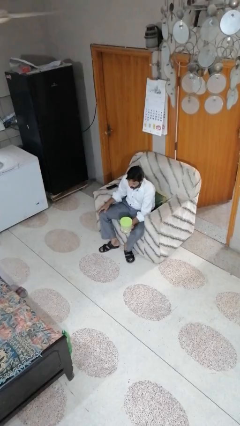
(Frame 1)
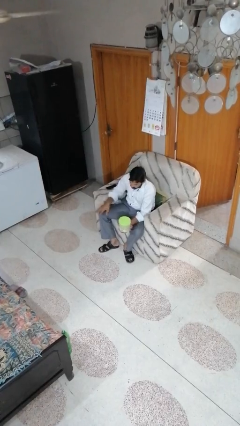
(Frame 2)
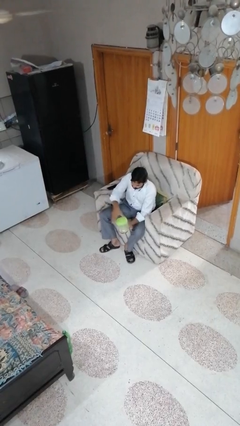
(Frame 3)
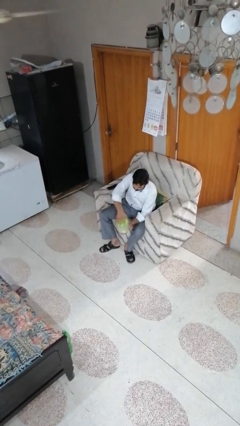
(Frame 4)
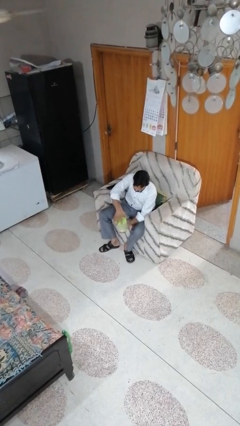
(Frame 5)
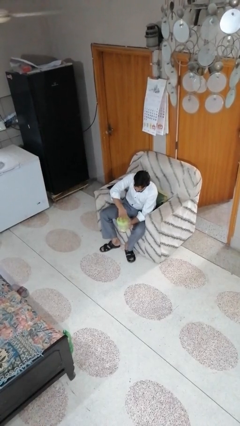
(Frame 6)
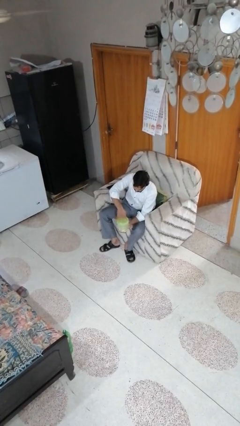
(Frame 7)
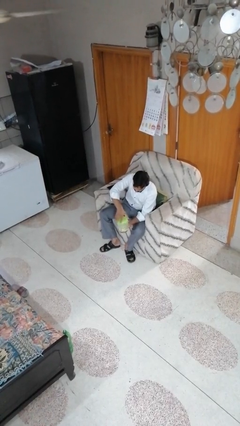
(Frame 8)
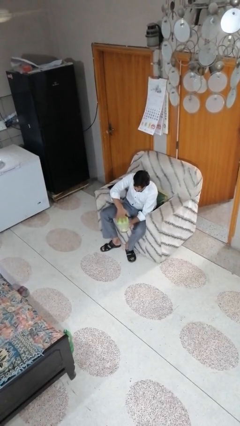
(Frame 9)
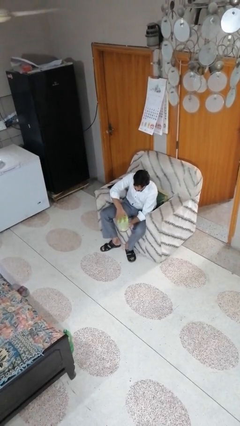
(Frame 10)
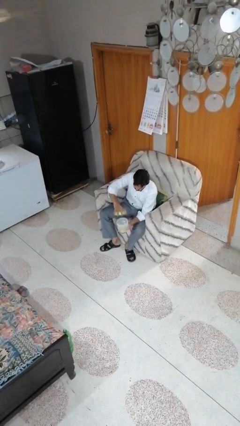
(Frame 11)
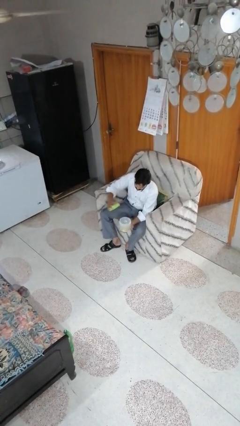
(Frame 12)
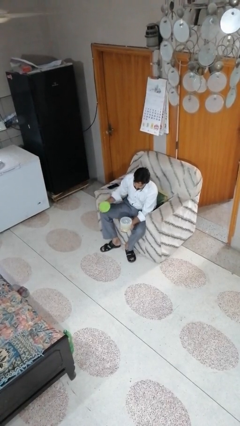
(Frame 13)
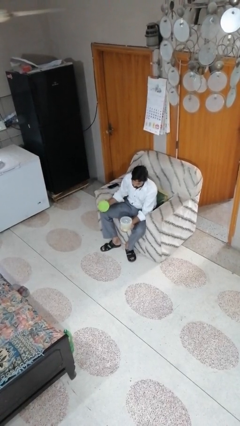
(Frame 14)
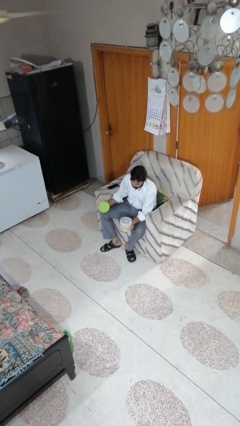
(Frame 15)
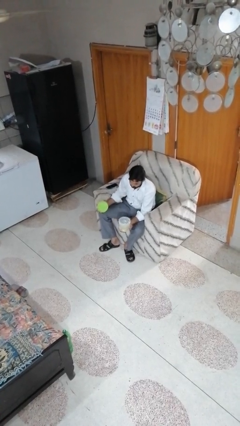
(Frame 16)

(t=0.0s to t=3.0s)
person opens jar

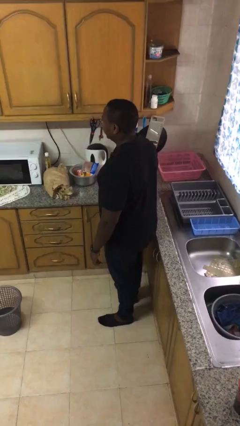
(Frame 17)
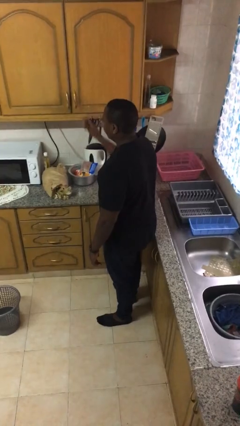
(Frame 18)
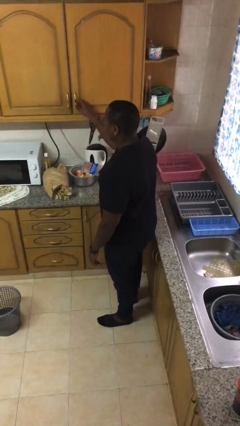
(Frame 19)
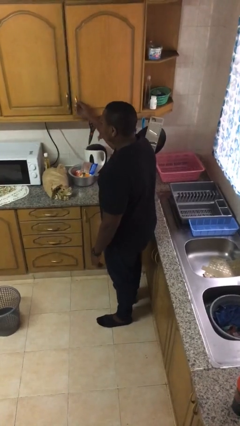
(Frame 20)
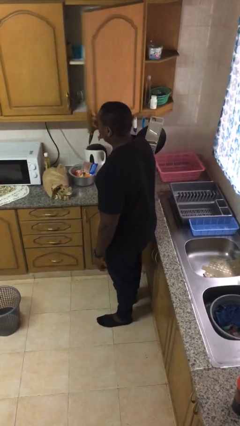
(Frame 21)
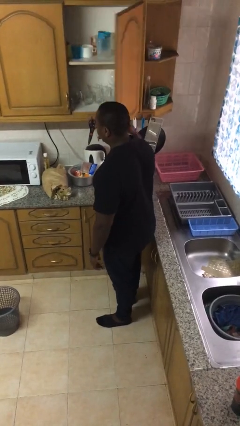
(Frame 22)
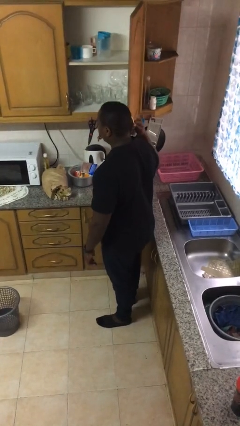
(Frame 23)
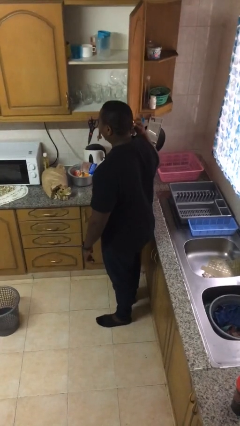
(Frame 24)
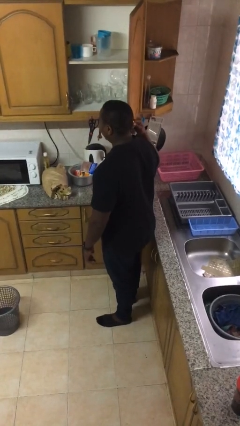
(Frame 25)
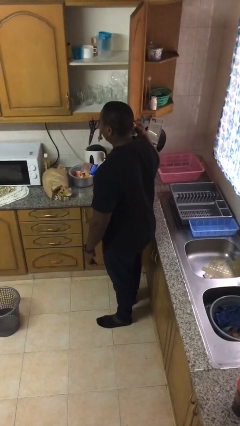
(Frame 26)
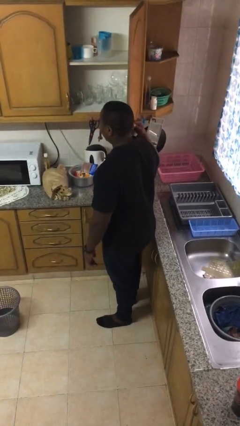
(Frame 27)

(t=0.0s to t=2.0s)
person opens cabinet

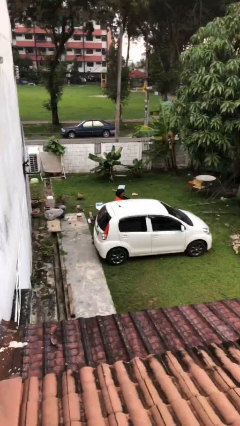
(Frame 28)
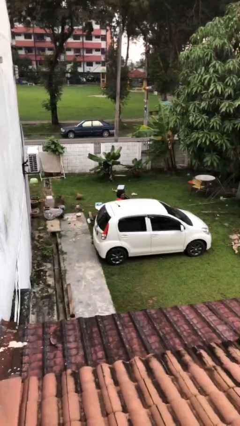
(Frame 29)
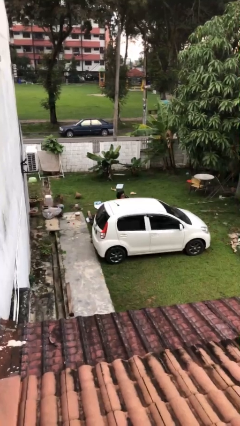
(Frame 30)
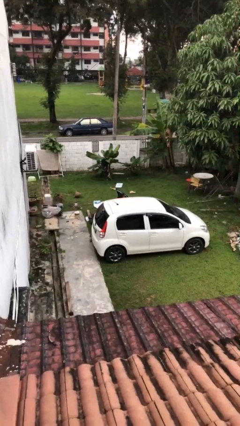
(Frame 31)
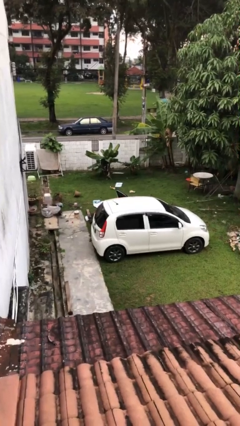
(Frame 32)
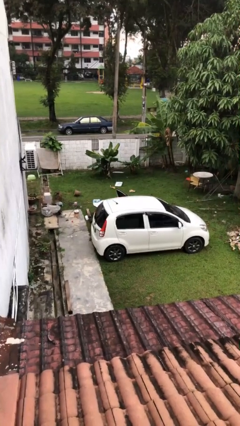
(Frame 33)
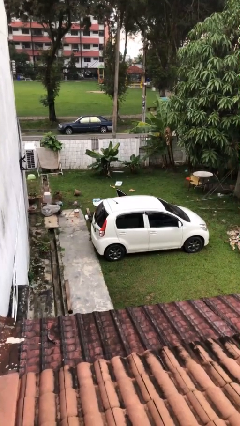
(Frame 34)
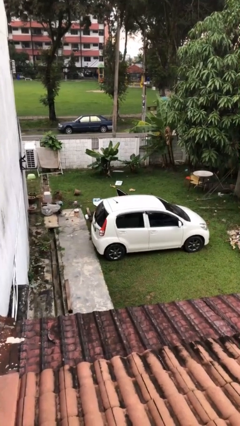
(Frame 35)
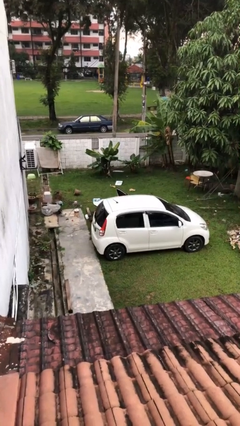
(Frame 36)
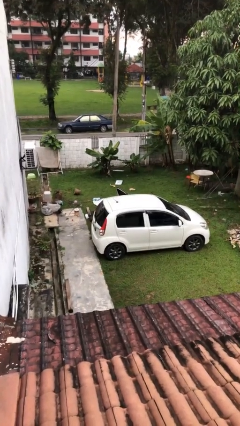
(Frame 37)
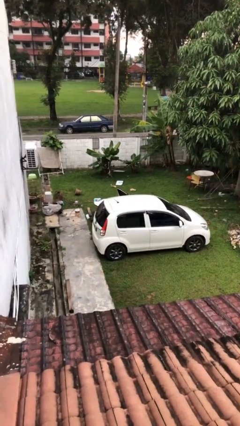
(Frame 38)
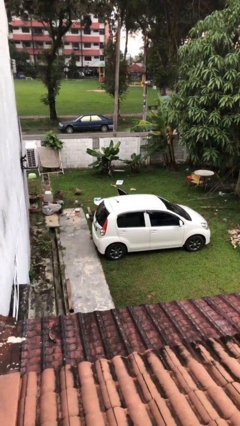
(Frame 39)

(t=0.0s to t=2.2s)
person enters car

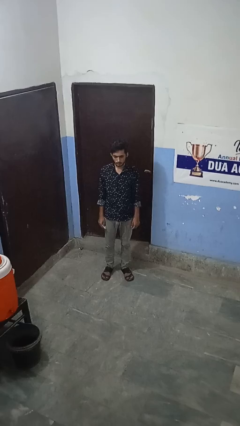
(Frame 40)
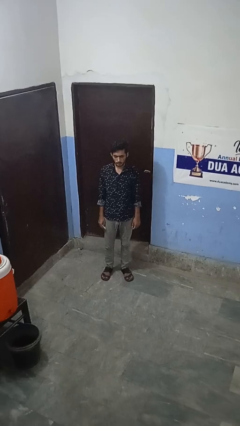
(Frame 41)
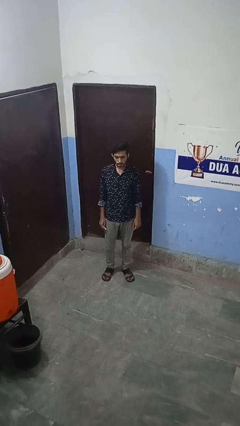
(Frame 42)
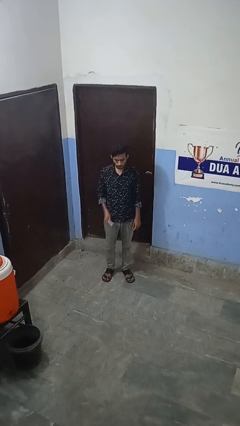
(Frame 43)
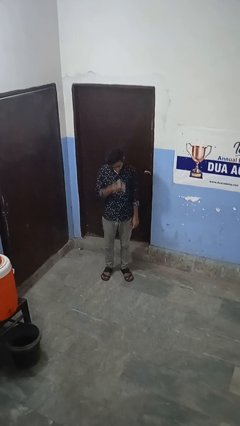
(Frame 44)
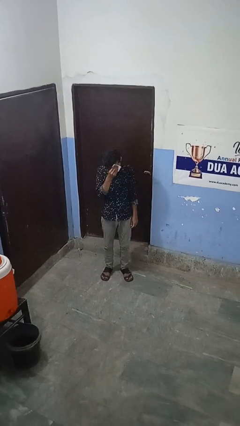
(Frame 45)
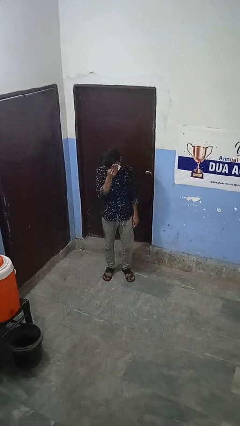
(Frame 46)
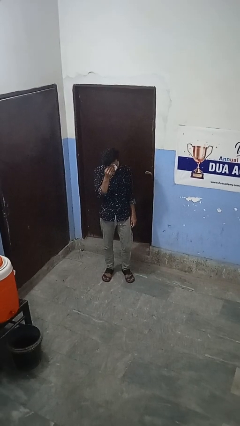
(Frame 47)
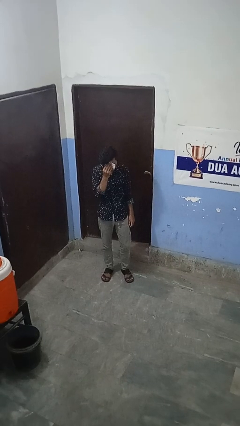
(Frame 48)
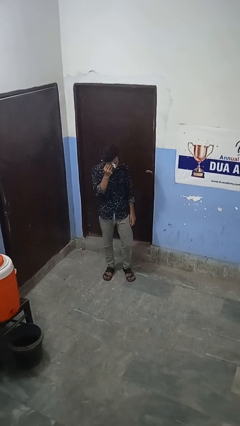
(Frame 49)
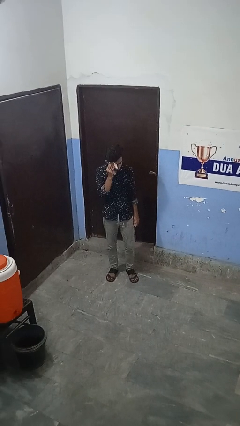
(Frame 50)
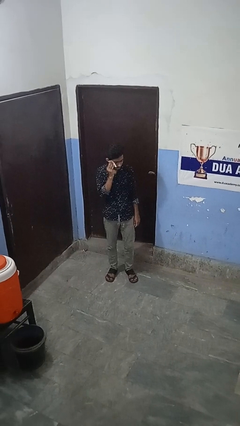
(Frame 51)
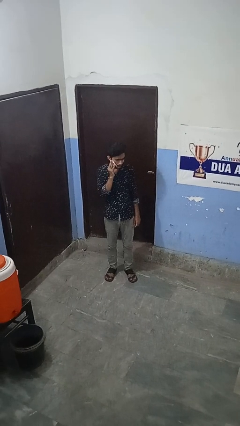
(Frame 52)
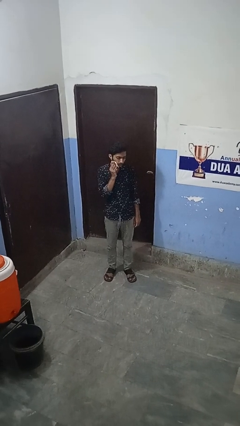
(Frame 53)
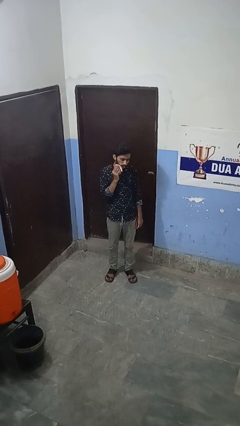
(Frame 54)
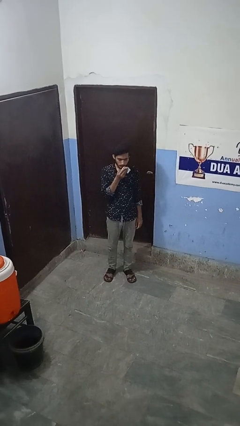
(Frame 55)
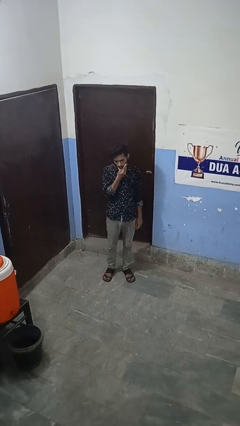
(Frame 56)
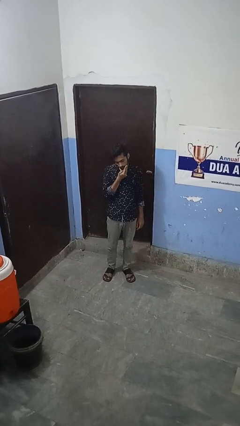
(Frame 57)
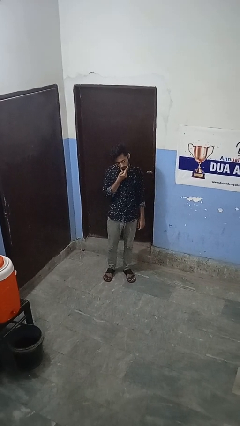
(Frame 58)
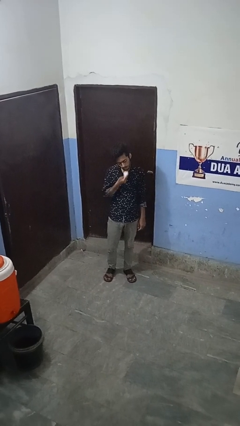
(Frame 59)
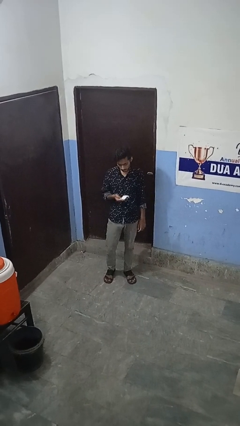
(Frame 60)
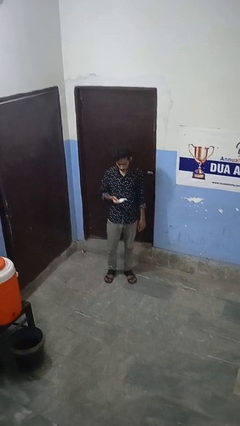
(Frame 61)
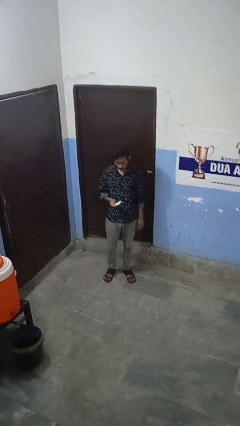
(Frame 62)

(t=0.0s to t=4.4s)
person wipes mouth with napkin

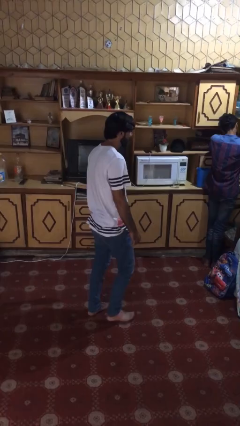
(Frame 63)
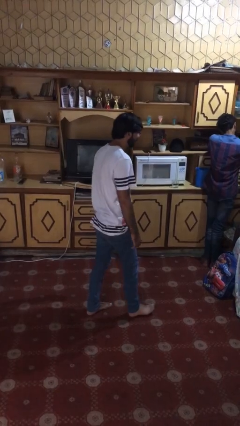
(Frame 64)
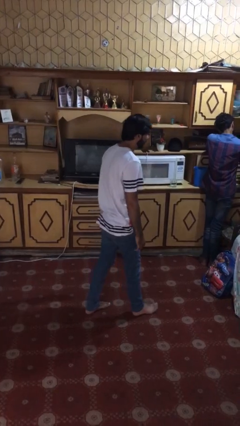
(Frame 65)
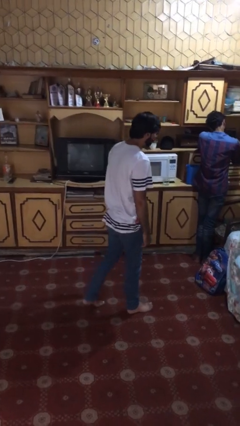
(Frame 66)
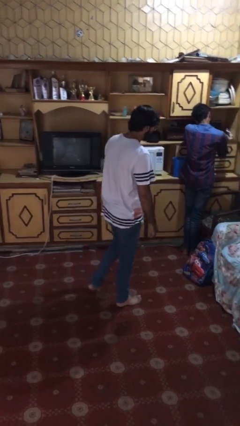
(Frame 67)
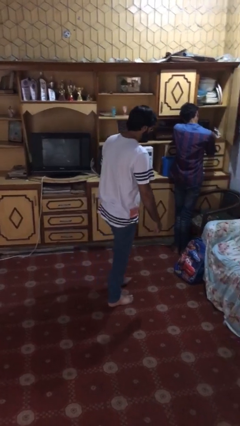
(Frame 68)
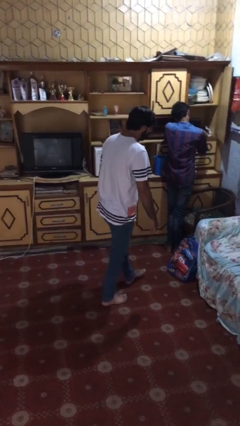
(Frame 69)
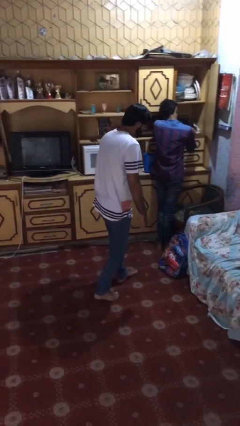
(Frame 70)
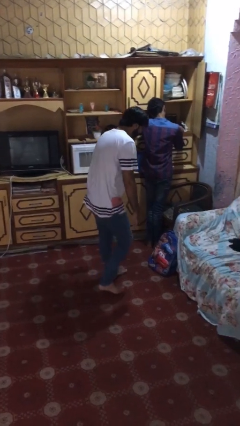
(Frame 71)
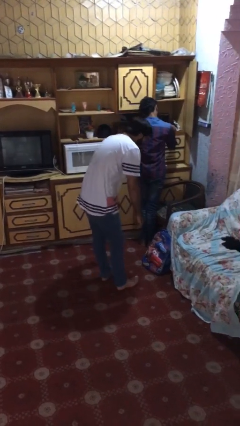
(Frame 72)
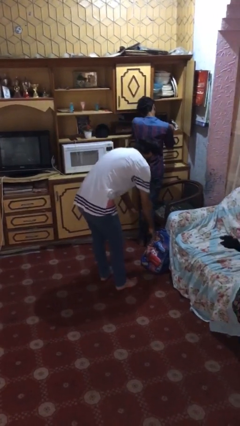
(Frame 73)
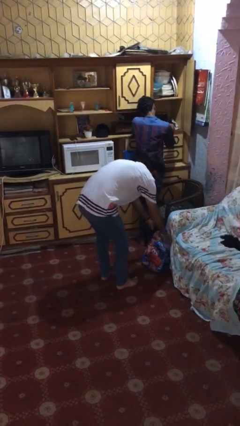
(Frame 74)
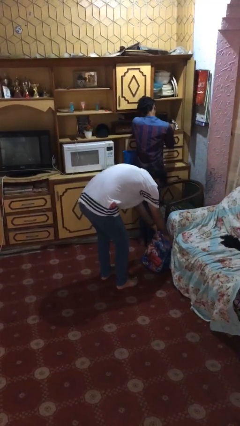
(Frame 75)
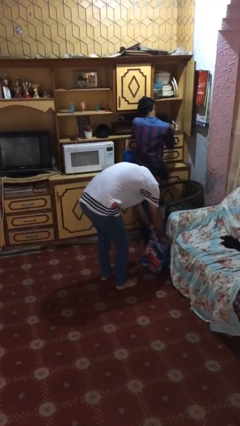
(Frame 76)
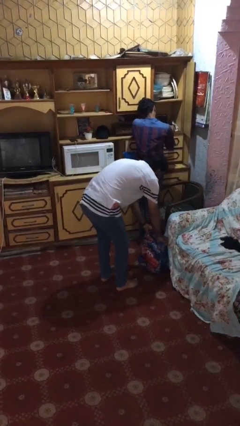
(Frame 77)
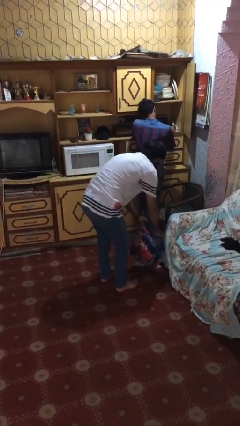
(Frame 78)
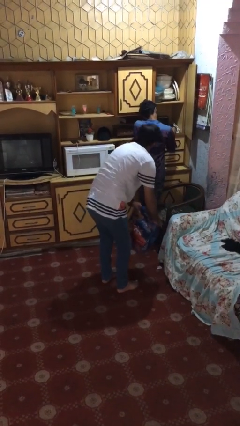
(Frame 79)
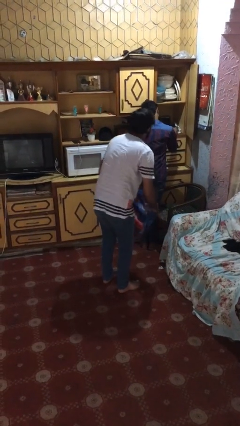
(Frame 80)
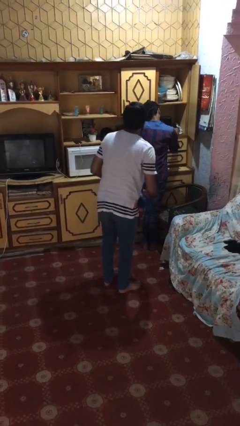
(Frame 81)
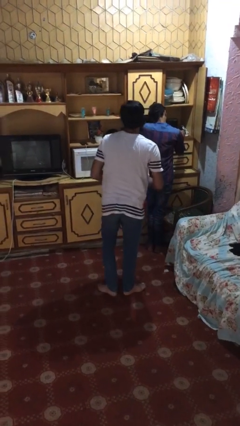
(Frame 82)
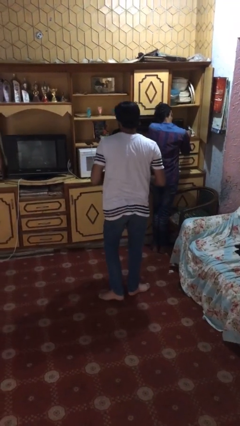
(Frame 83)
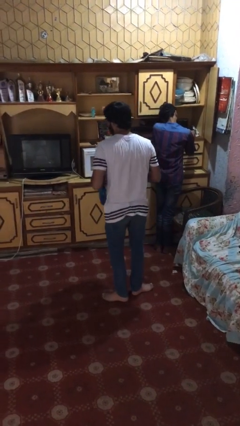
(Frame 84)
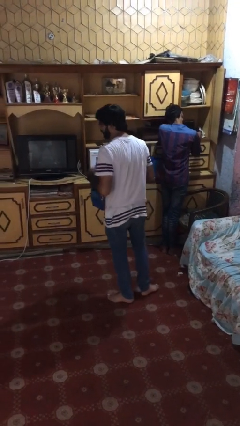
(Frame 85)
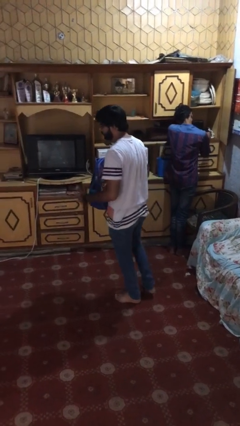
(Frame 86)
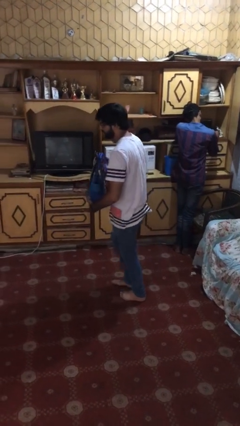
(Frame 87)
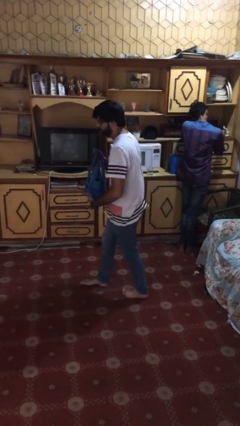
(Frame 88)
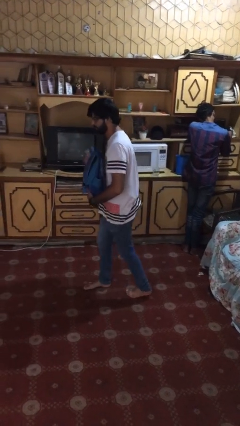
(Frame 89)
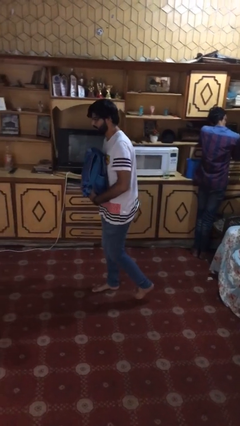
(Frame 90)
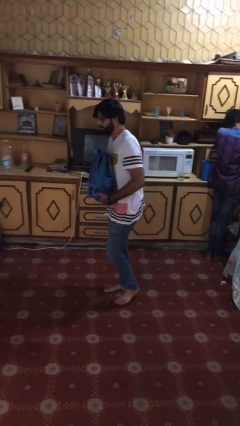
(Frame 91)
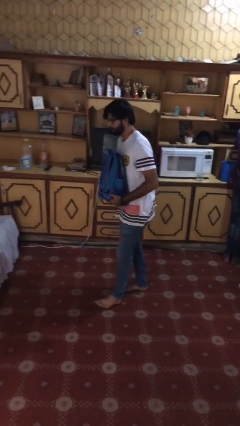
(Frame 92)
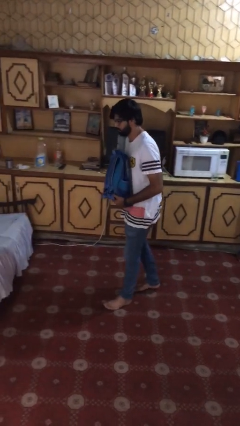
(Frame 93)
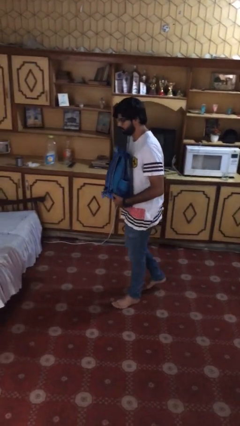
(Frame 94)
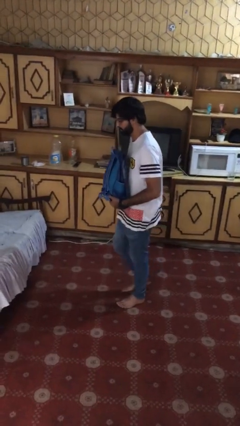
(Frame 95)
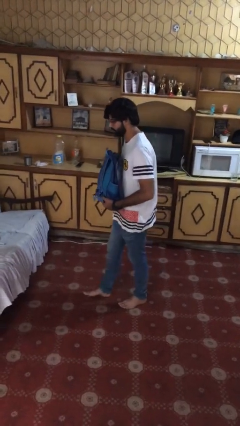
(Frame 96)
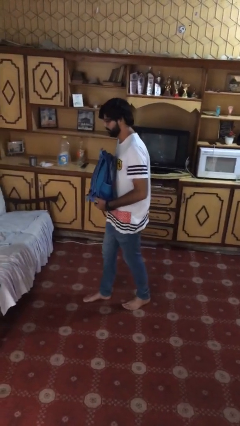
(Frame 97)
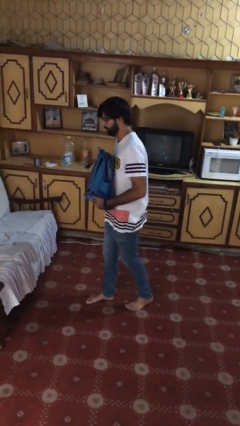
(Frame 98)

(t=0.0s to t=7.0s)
person steals object from person
